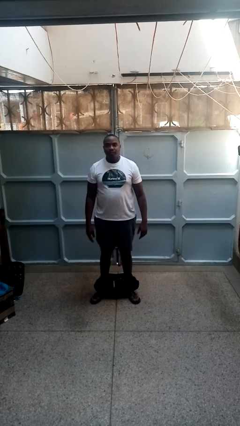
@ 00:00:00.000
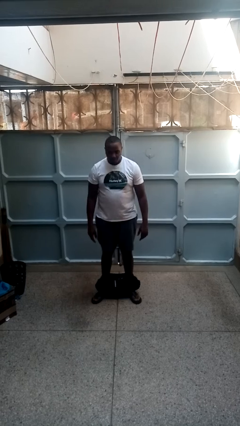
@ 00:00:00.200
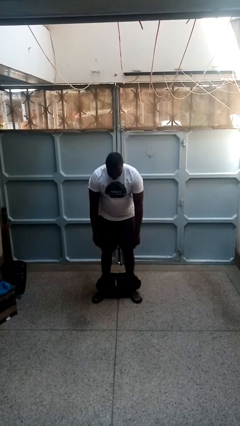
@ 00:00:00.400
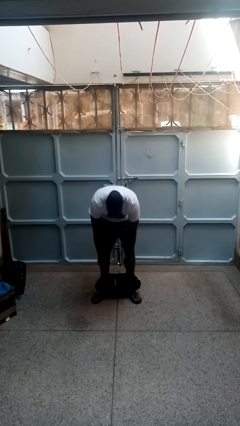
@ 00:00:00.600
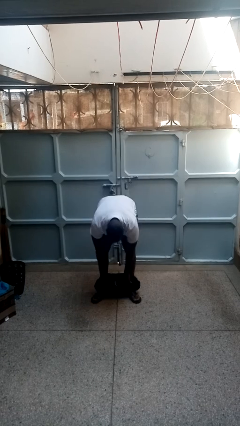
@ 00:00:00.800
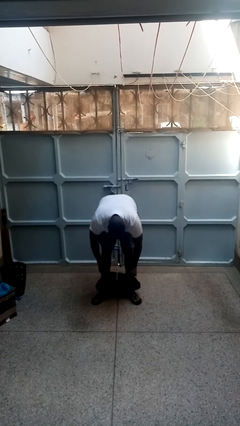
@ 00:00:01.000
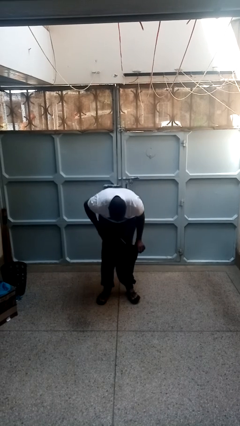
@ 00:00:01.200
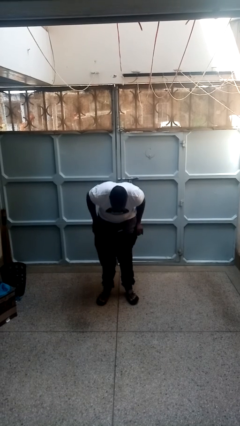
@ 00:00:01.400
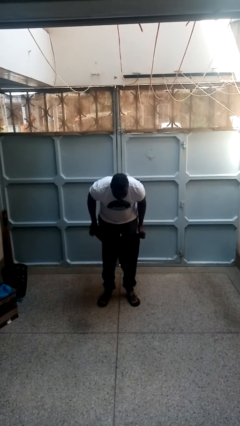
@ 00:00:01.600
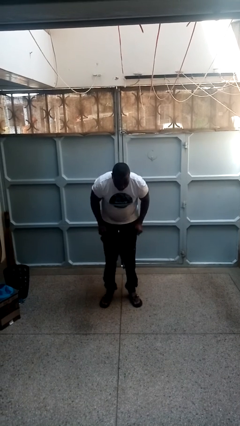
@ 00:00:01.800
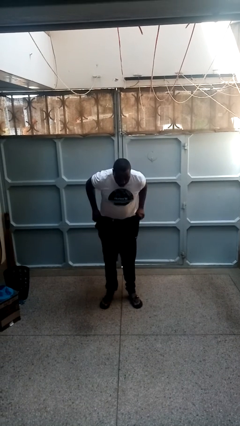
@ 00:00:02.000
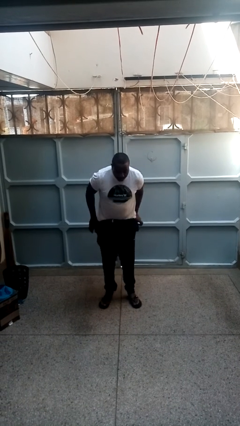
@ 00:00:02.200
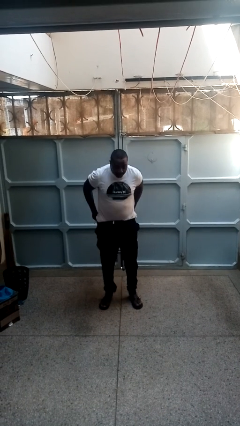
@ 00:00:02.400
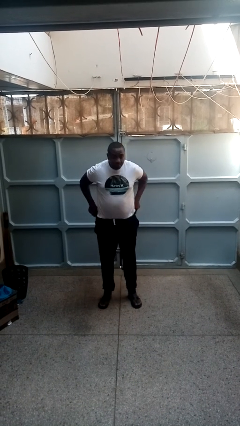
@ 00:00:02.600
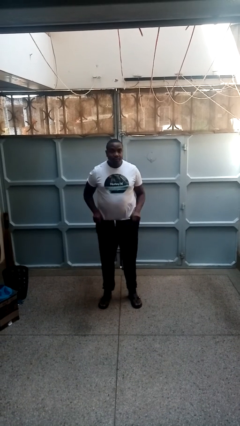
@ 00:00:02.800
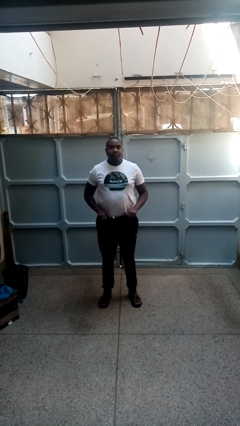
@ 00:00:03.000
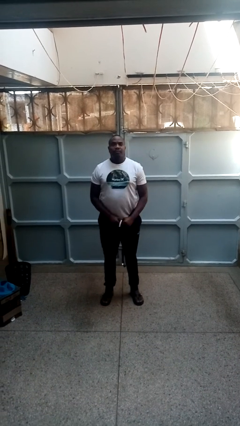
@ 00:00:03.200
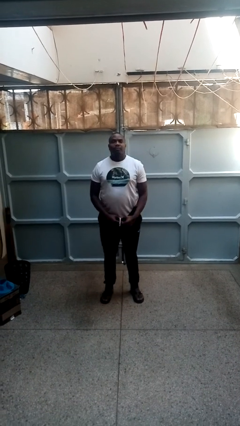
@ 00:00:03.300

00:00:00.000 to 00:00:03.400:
person puts on pants

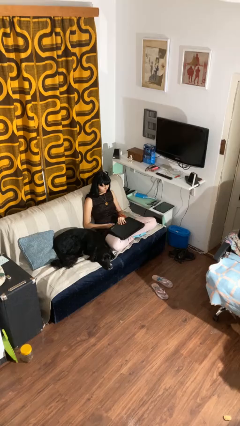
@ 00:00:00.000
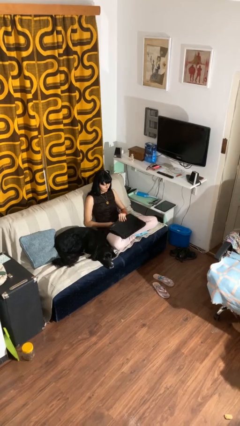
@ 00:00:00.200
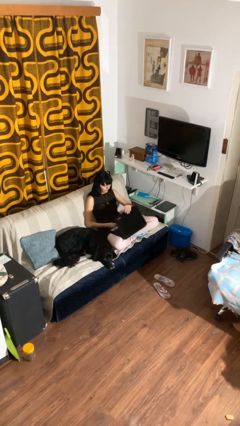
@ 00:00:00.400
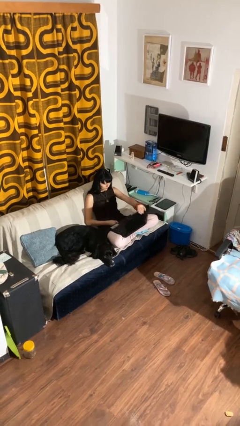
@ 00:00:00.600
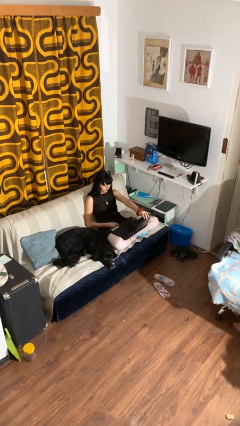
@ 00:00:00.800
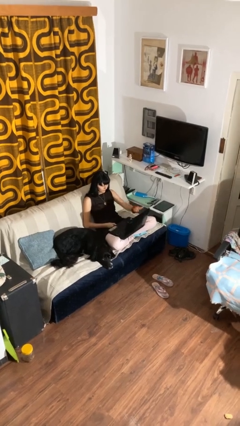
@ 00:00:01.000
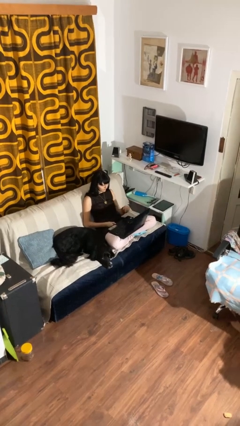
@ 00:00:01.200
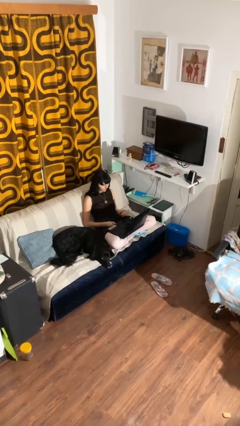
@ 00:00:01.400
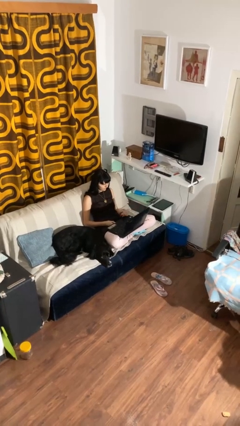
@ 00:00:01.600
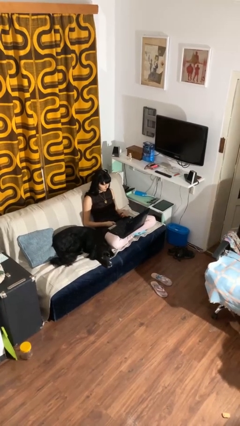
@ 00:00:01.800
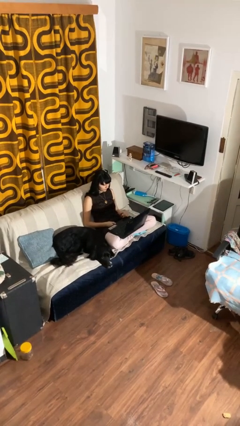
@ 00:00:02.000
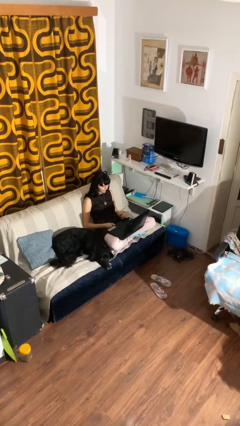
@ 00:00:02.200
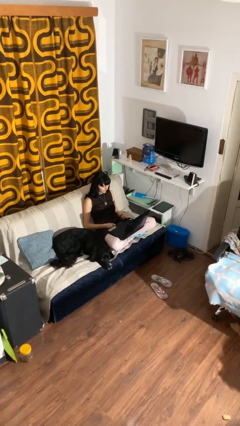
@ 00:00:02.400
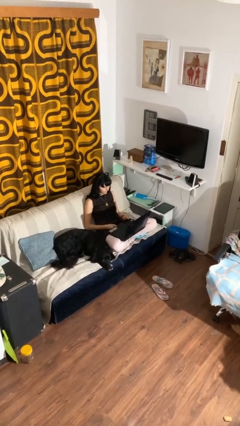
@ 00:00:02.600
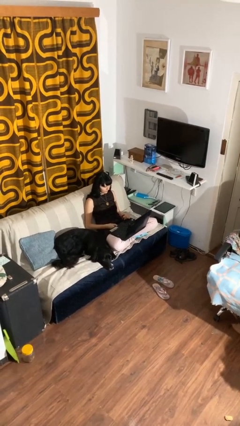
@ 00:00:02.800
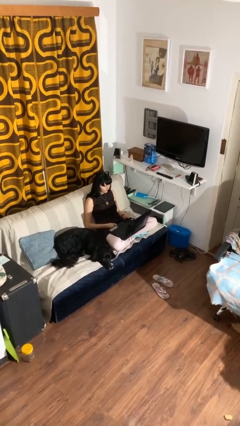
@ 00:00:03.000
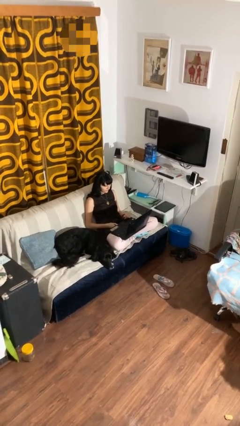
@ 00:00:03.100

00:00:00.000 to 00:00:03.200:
person opens laptop

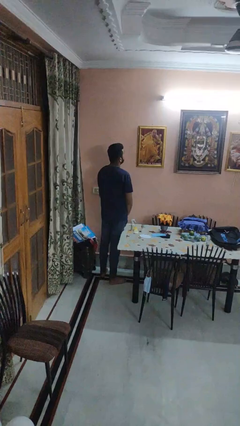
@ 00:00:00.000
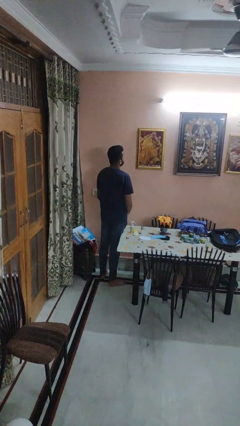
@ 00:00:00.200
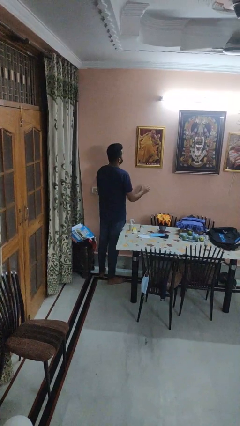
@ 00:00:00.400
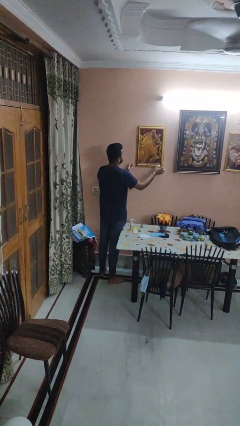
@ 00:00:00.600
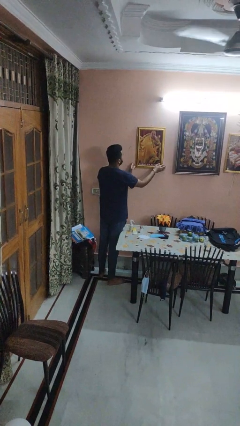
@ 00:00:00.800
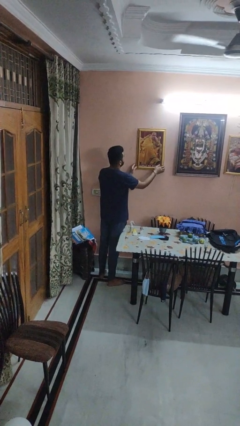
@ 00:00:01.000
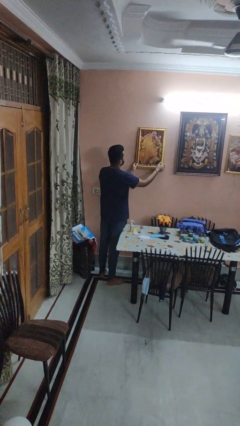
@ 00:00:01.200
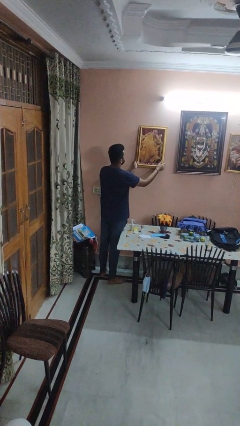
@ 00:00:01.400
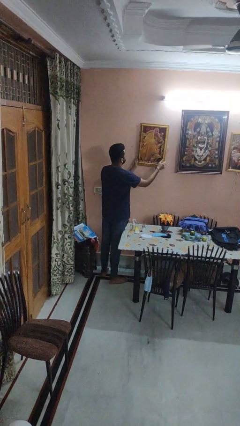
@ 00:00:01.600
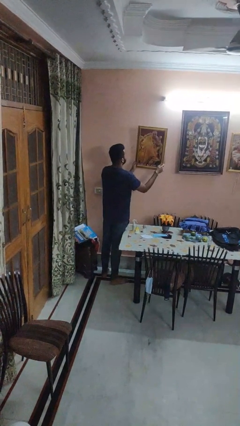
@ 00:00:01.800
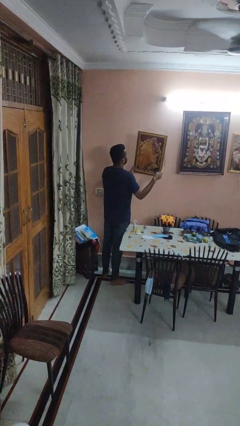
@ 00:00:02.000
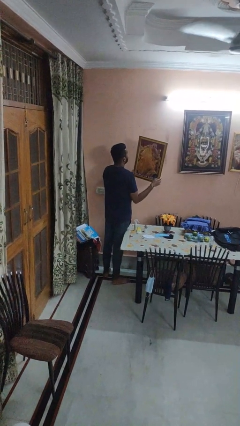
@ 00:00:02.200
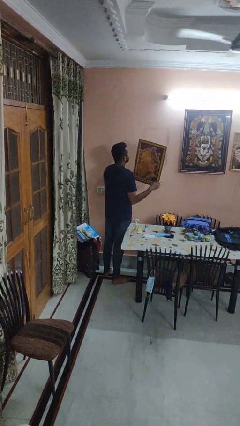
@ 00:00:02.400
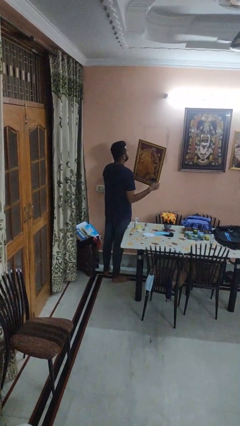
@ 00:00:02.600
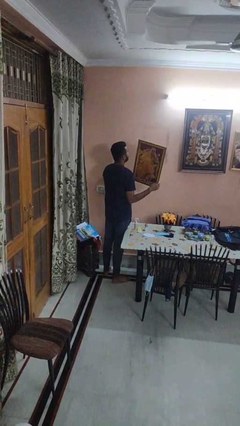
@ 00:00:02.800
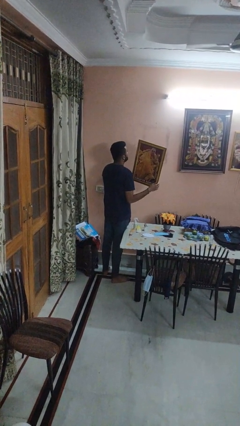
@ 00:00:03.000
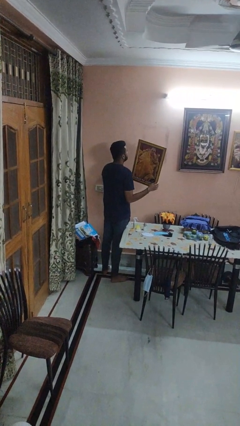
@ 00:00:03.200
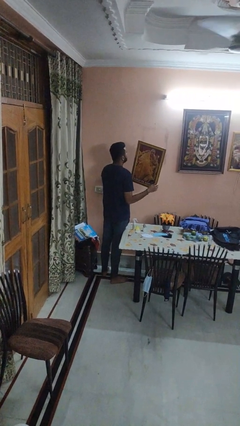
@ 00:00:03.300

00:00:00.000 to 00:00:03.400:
person takes down picture frame

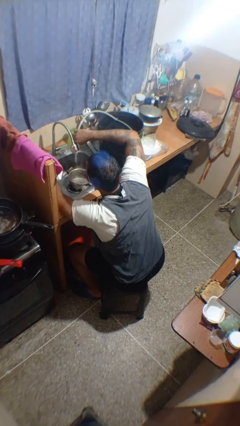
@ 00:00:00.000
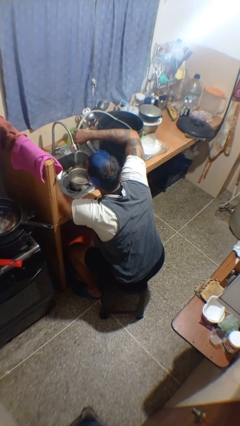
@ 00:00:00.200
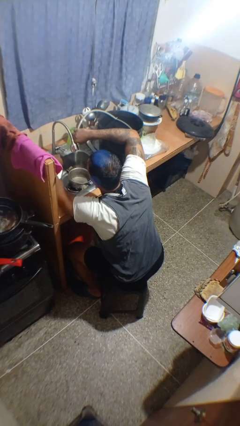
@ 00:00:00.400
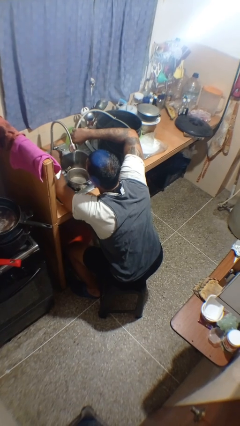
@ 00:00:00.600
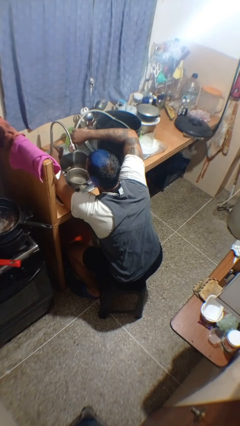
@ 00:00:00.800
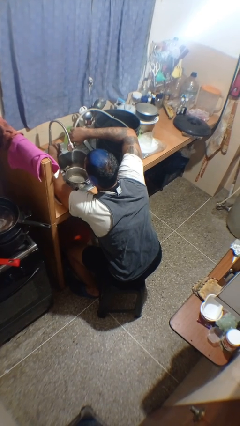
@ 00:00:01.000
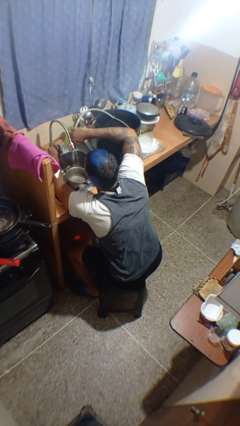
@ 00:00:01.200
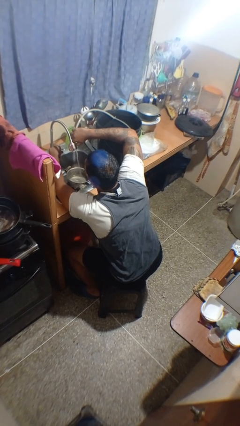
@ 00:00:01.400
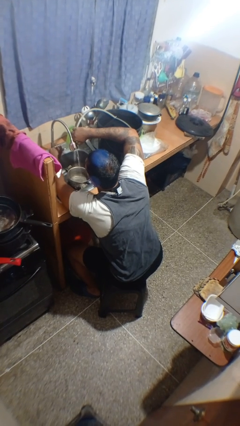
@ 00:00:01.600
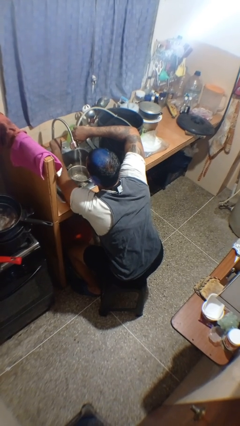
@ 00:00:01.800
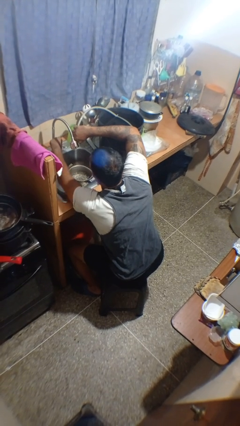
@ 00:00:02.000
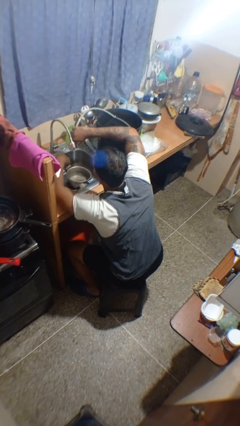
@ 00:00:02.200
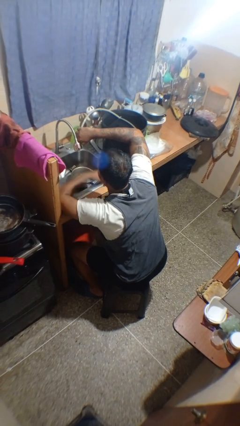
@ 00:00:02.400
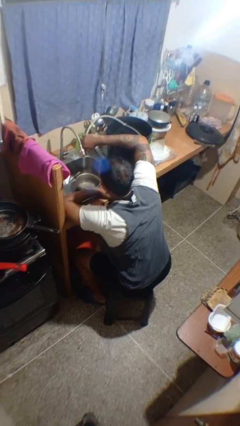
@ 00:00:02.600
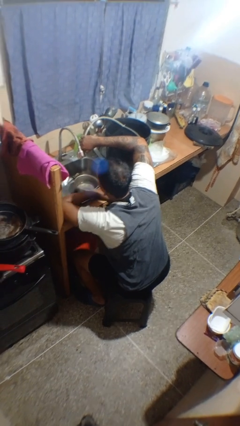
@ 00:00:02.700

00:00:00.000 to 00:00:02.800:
person turns off faucet

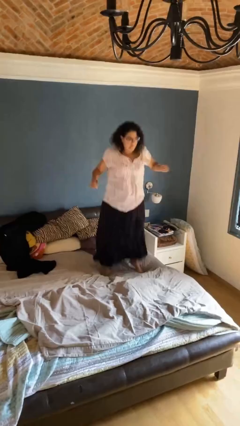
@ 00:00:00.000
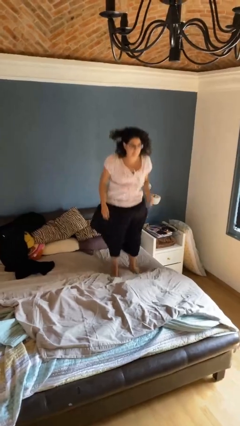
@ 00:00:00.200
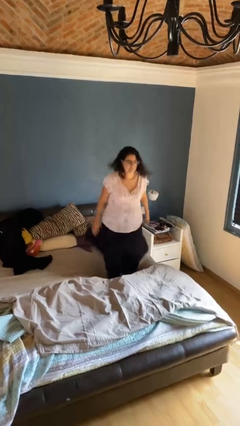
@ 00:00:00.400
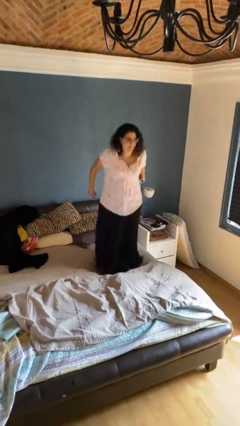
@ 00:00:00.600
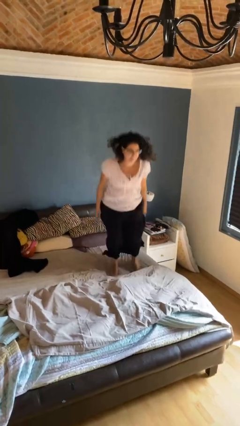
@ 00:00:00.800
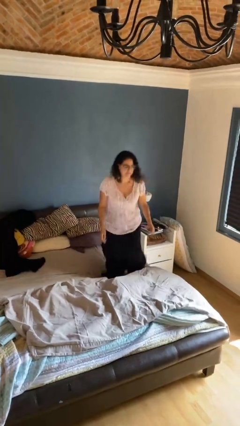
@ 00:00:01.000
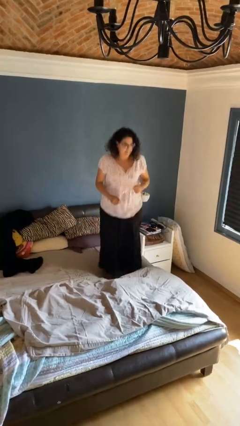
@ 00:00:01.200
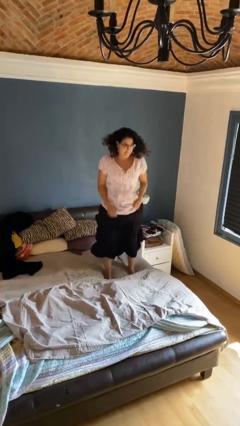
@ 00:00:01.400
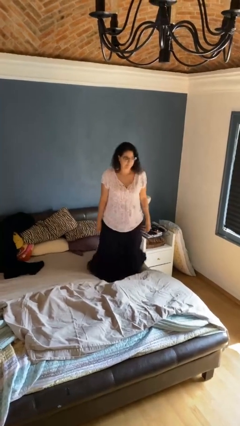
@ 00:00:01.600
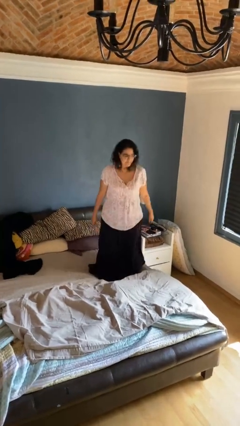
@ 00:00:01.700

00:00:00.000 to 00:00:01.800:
person jumps on bed

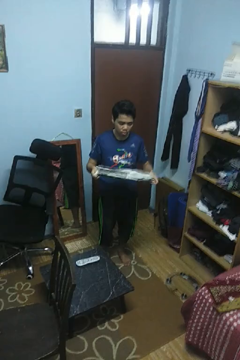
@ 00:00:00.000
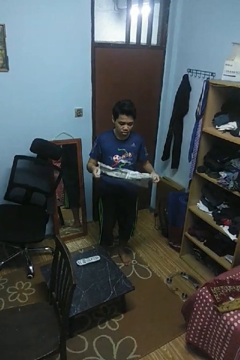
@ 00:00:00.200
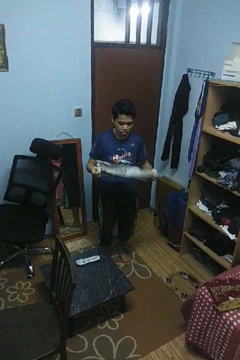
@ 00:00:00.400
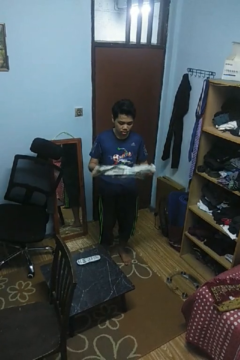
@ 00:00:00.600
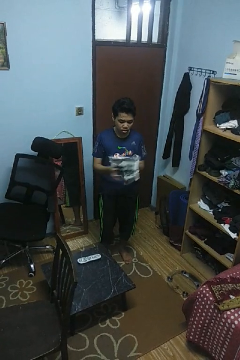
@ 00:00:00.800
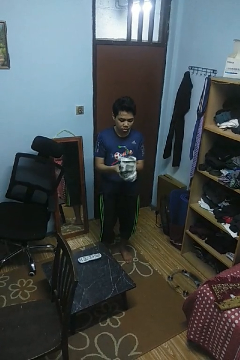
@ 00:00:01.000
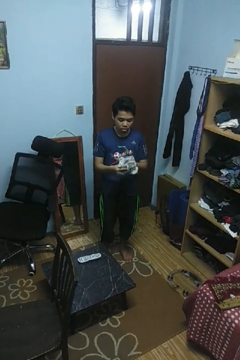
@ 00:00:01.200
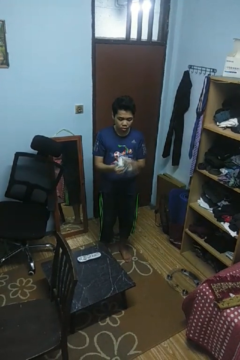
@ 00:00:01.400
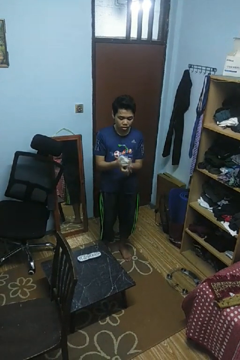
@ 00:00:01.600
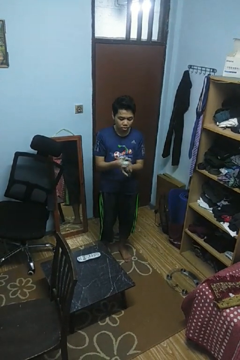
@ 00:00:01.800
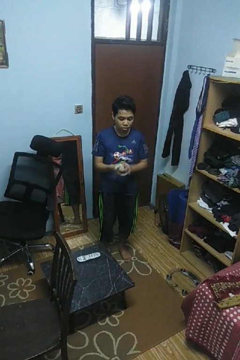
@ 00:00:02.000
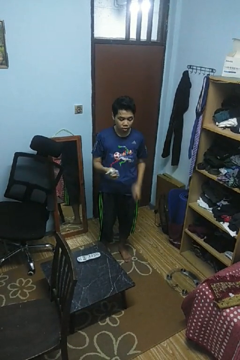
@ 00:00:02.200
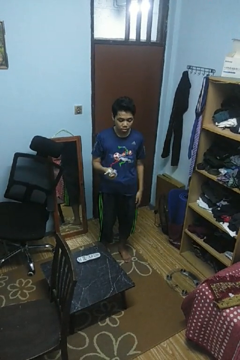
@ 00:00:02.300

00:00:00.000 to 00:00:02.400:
person crumples paper

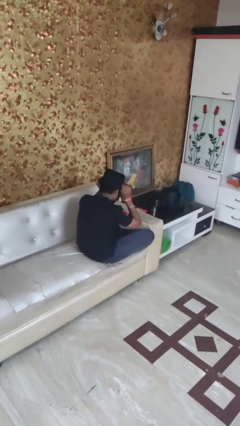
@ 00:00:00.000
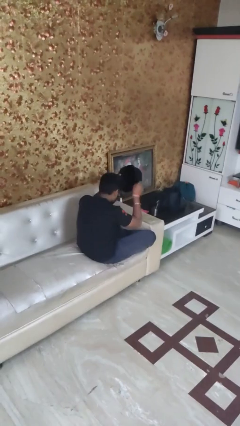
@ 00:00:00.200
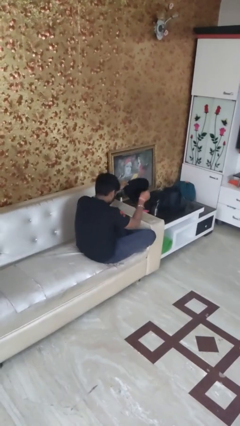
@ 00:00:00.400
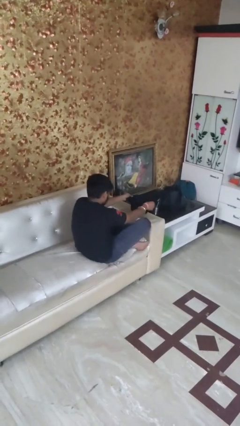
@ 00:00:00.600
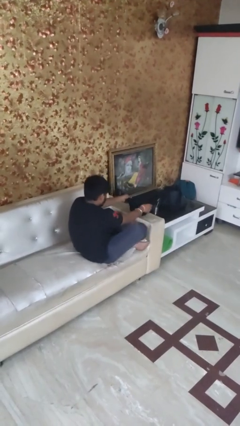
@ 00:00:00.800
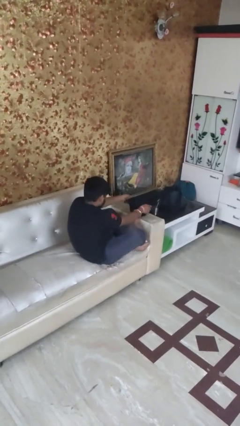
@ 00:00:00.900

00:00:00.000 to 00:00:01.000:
person takes off hat
